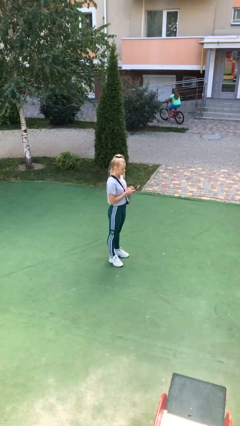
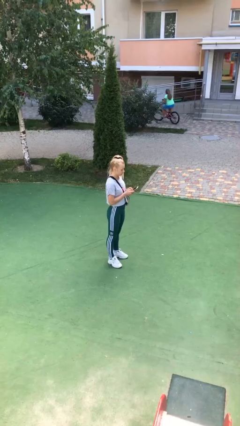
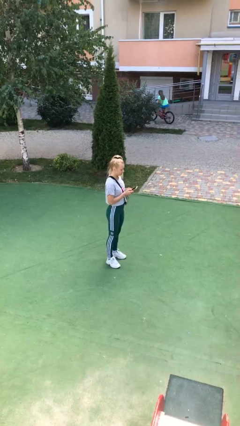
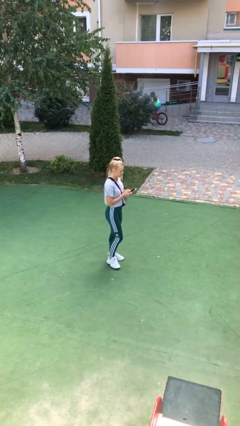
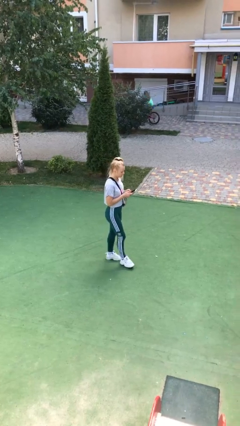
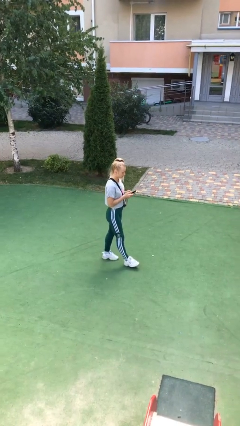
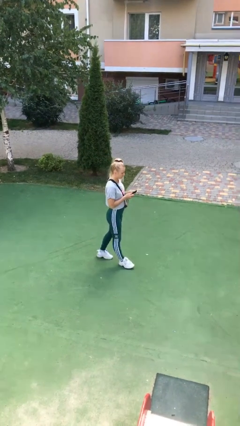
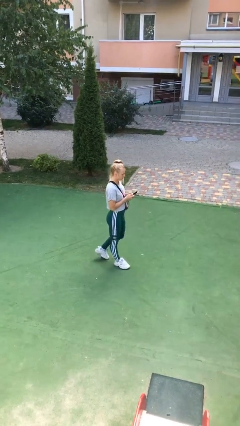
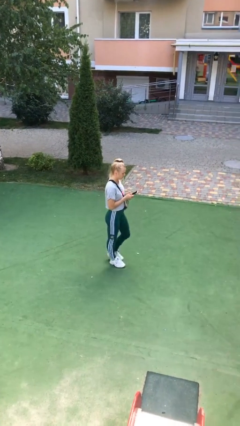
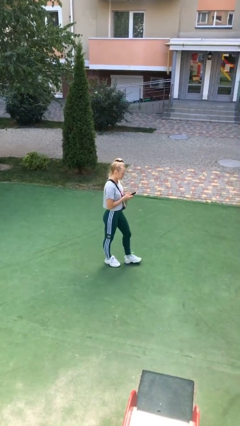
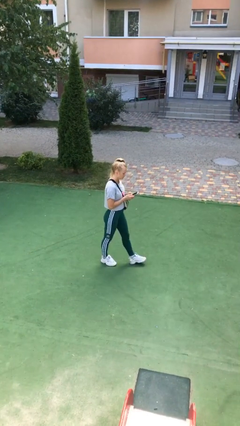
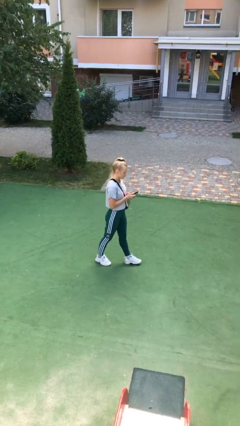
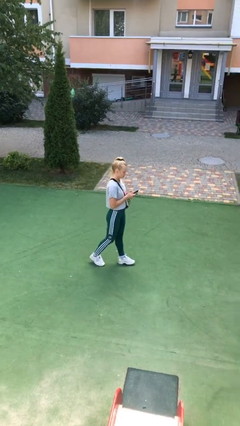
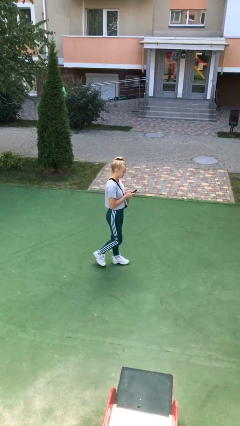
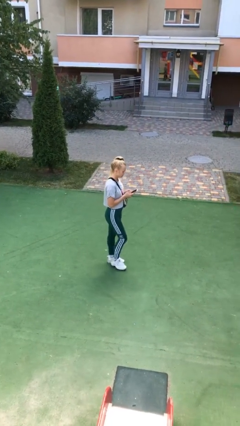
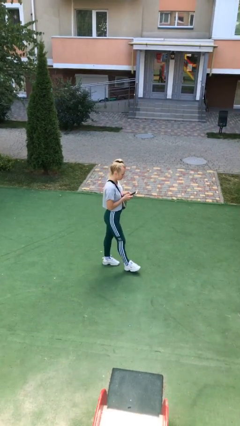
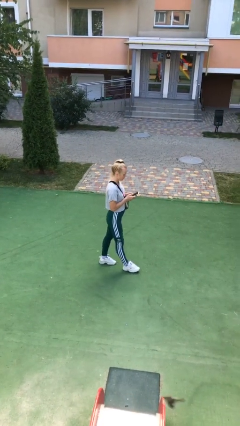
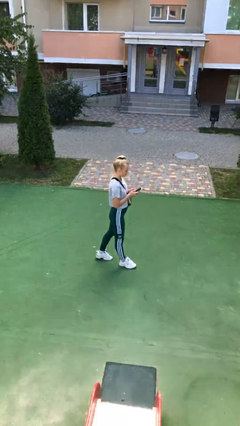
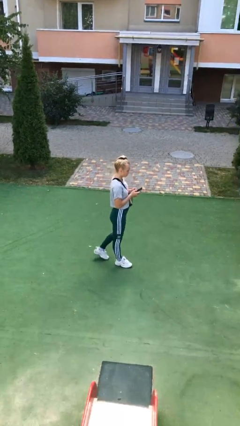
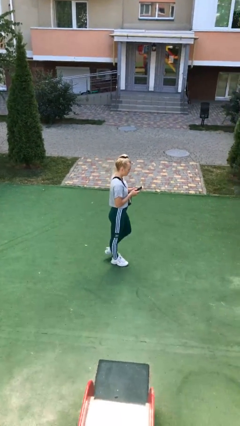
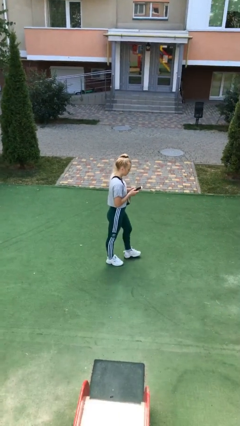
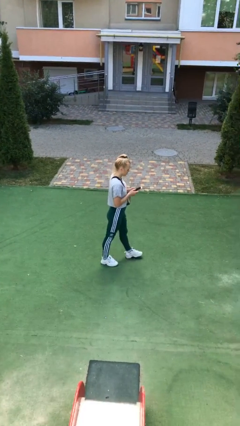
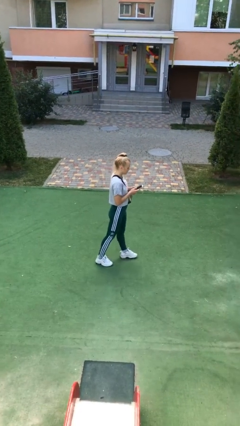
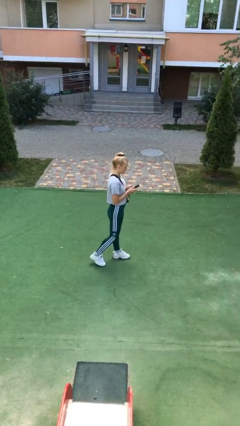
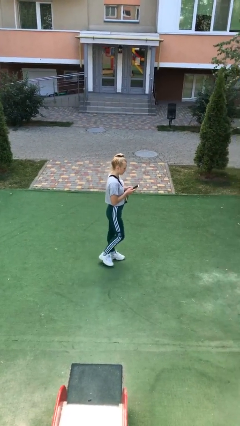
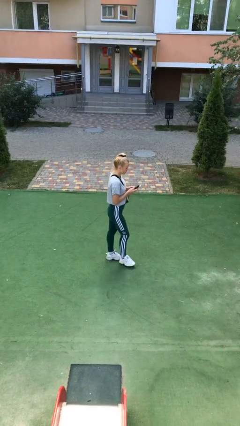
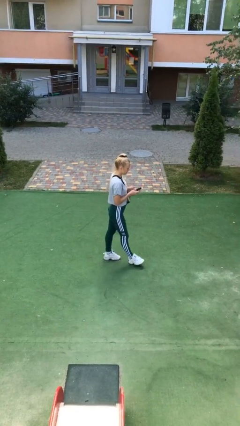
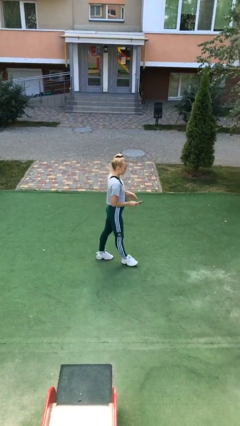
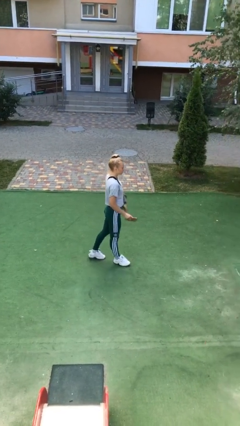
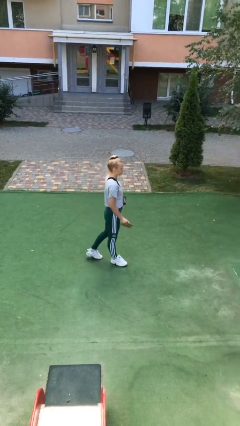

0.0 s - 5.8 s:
person texts on phone

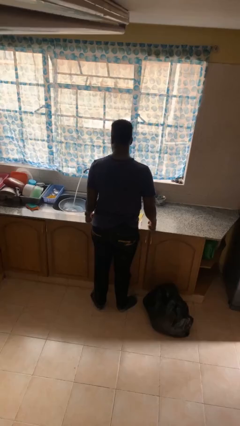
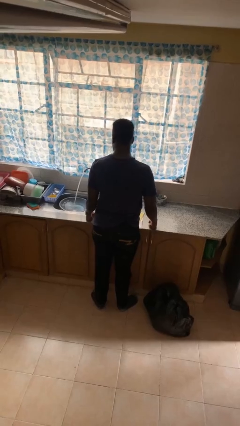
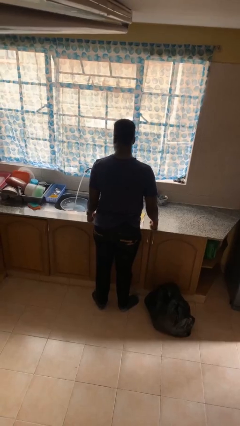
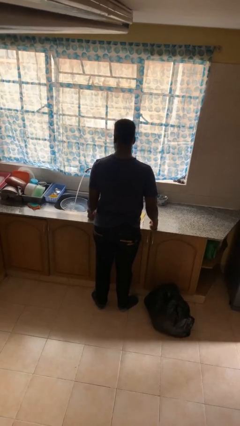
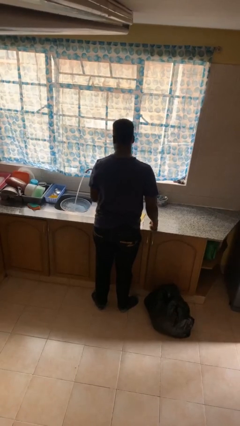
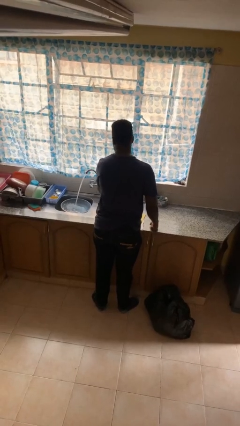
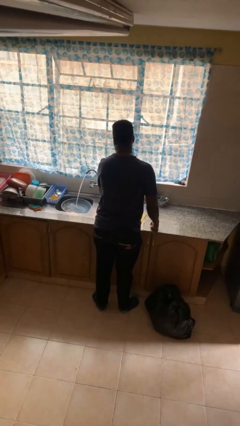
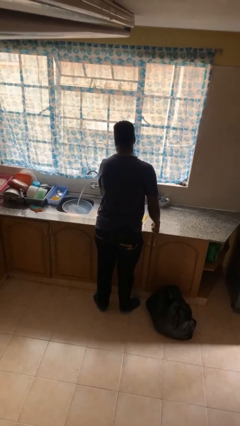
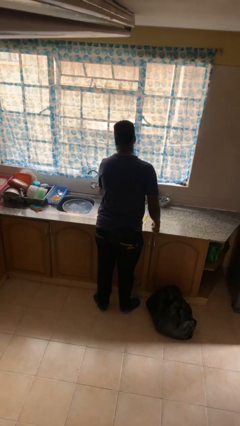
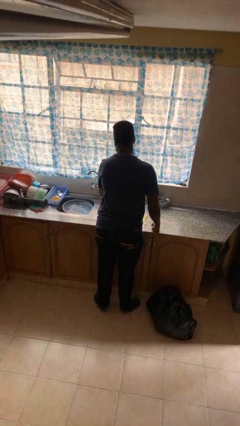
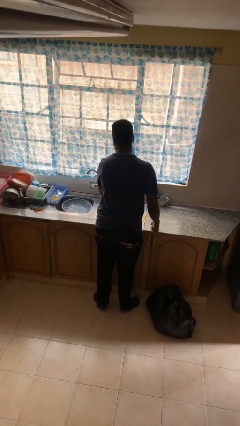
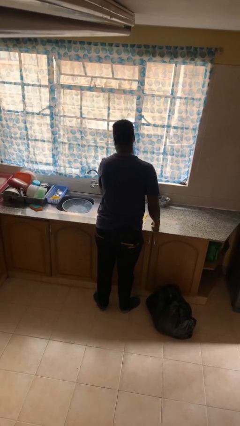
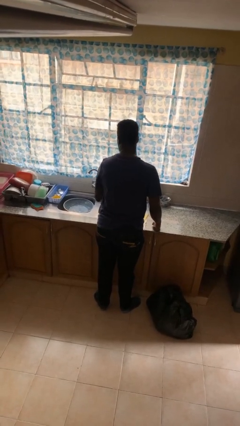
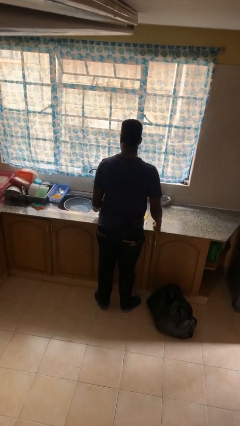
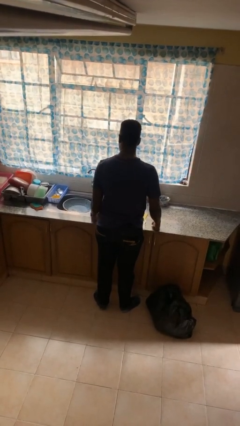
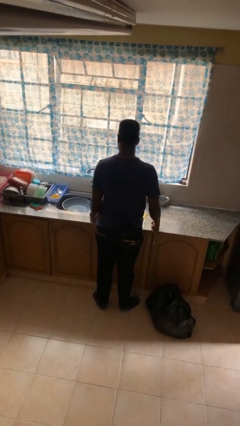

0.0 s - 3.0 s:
person turns off faucet

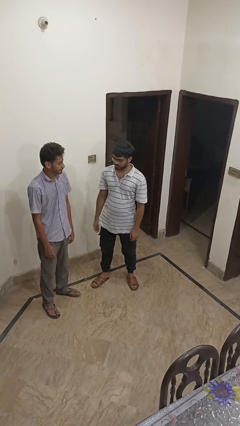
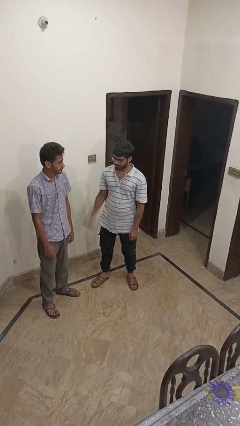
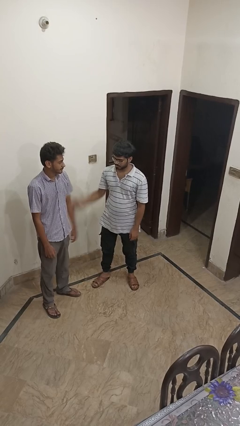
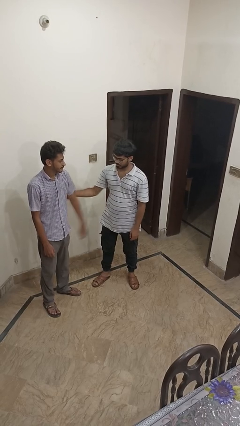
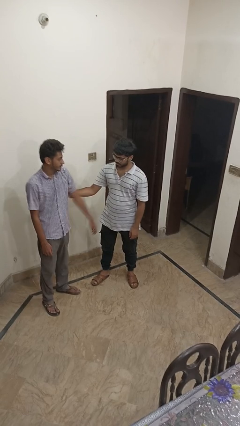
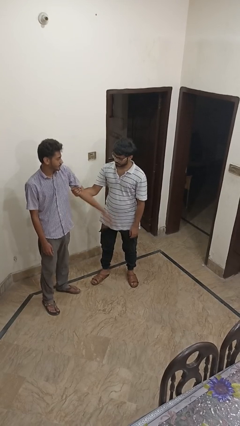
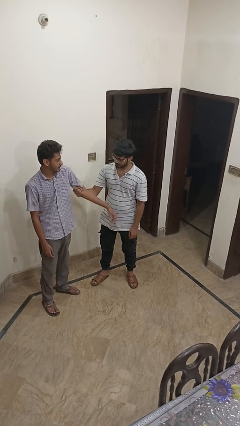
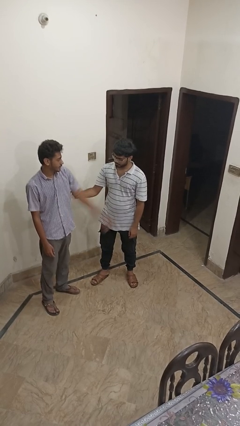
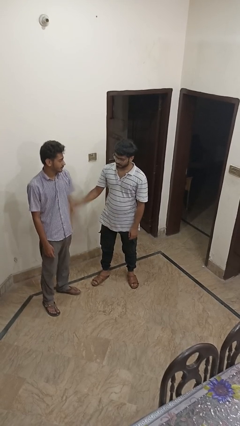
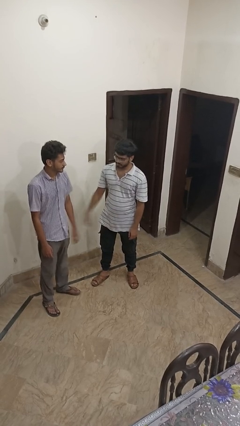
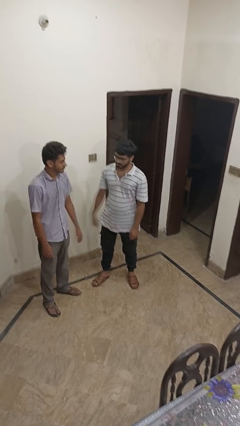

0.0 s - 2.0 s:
person grabs person by bicep

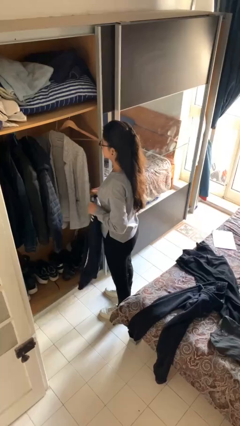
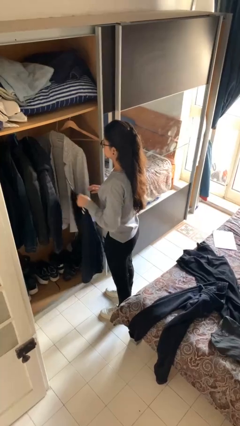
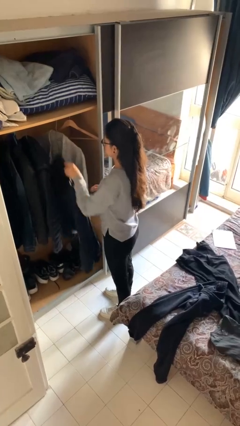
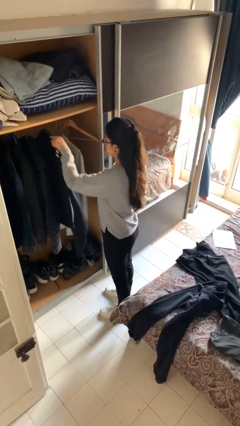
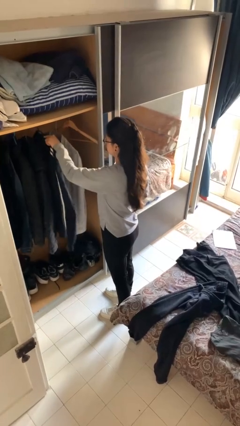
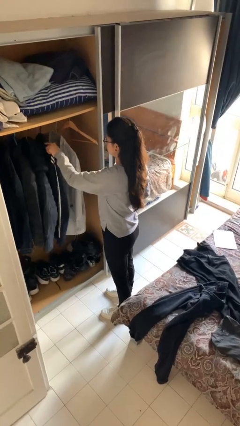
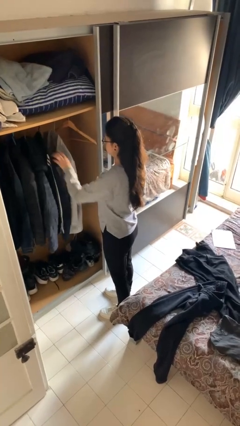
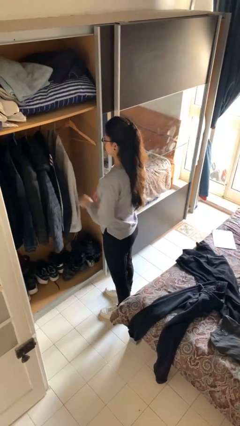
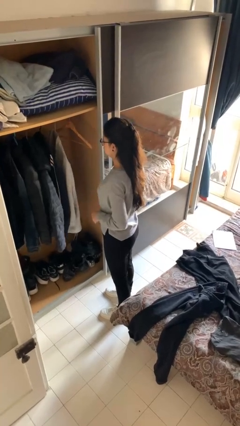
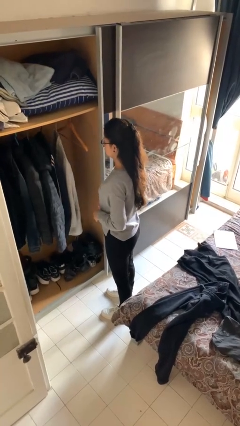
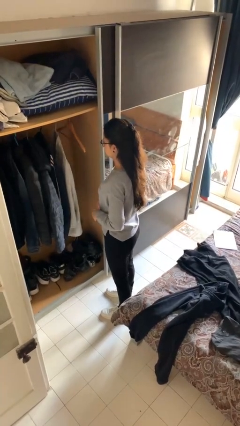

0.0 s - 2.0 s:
person puts clothes into closet

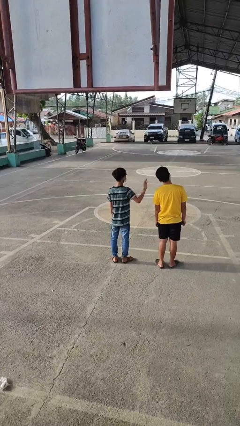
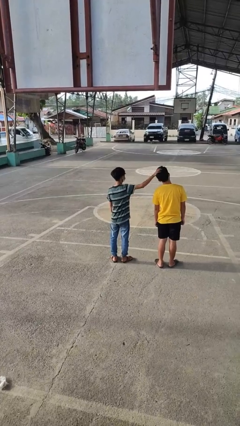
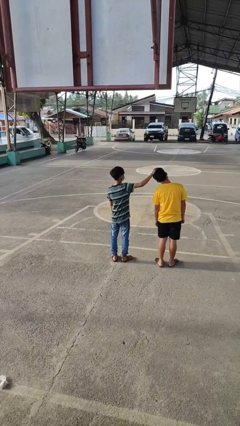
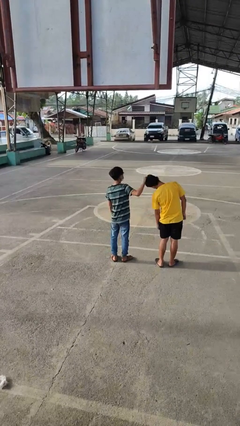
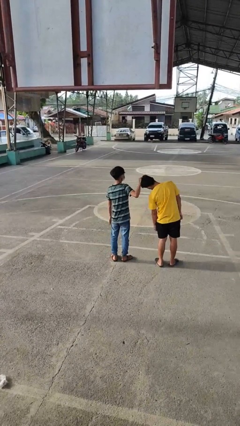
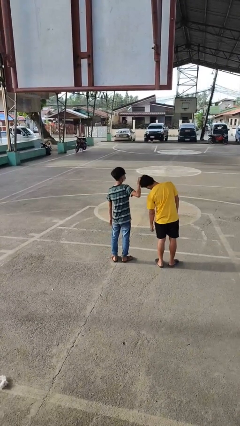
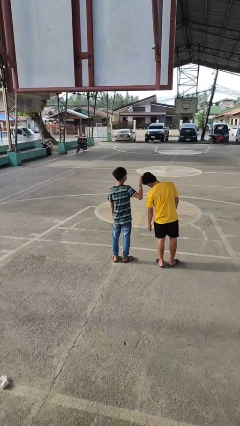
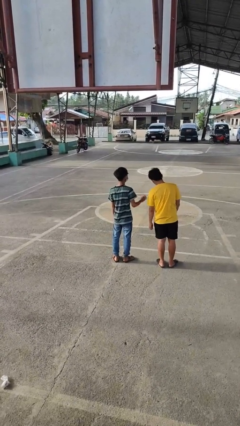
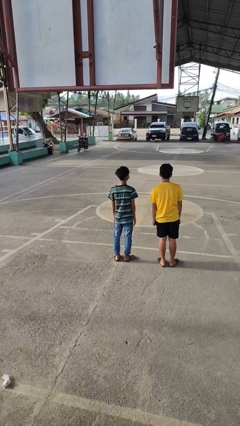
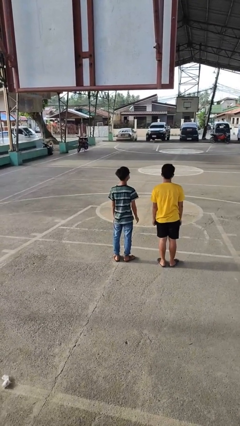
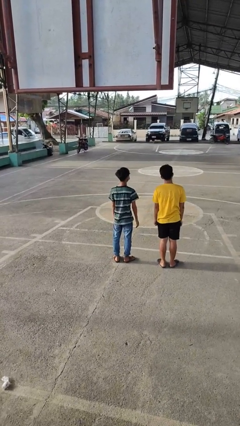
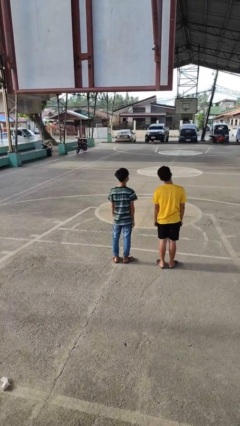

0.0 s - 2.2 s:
person grabs person by hair

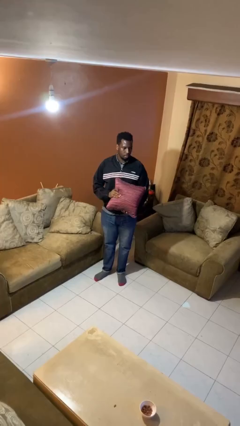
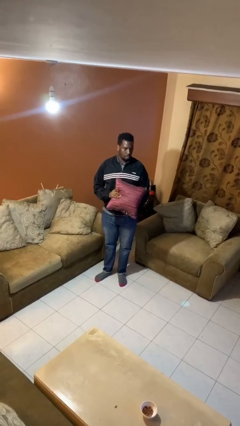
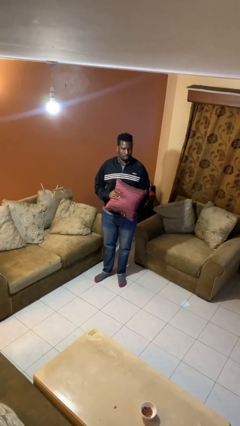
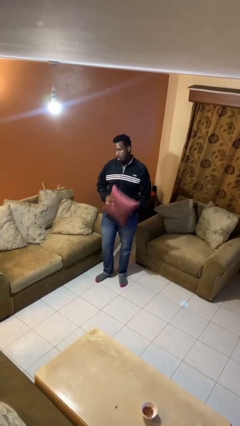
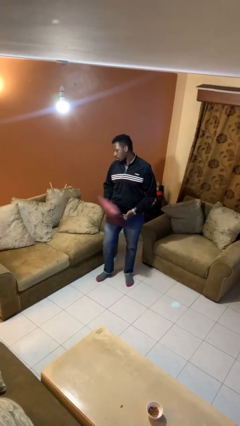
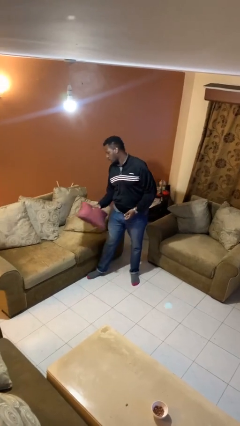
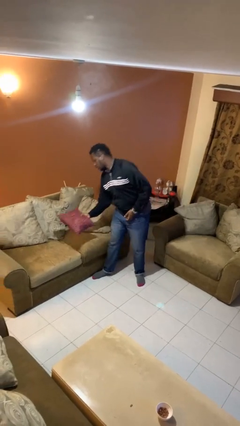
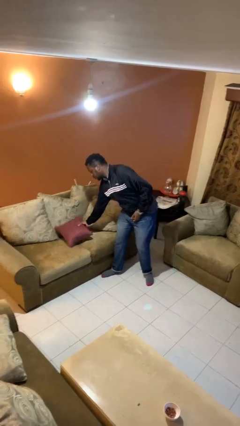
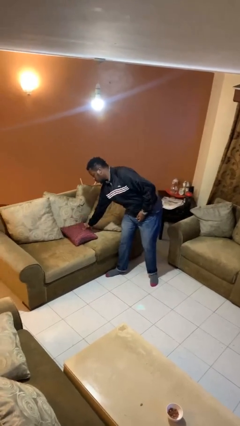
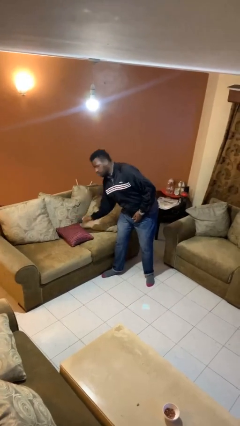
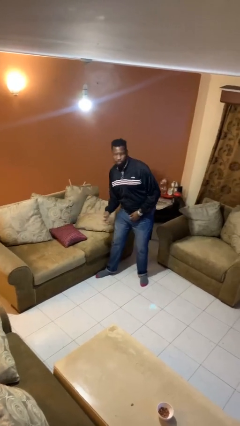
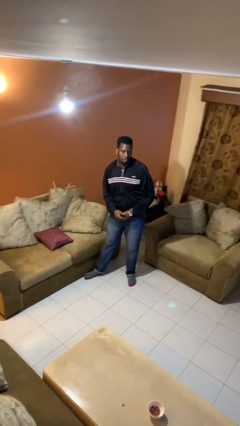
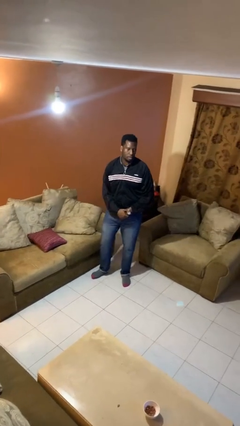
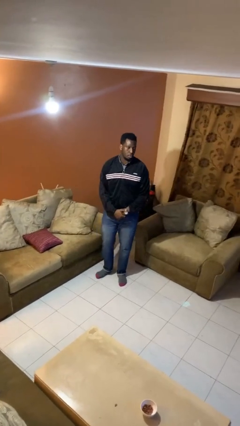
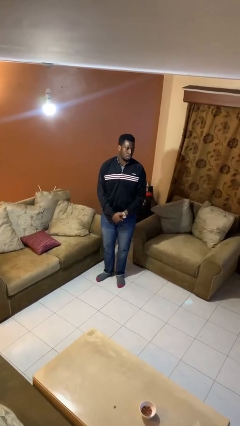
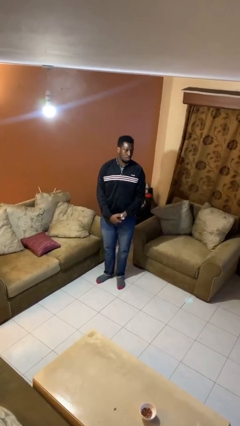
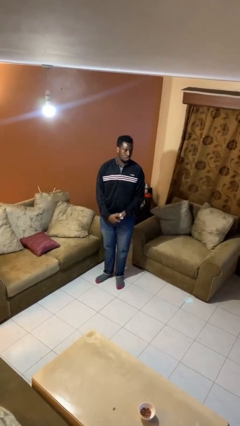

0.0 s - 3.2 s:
person puts down object on couch
